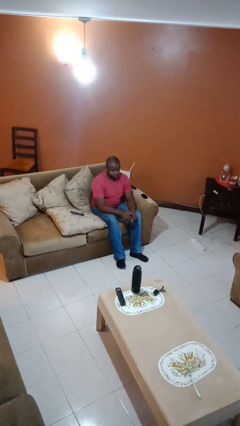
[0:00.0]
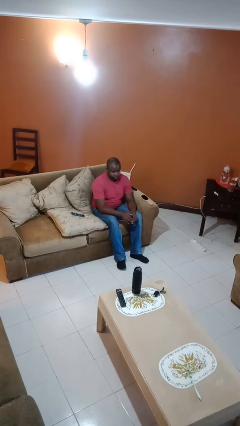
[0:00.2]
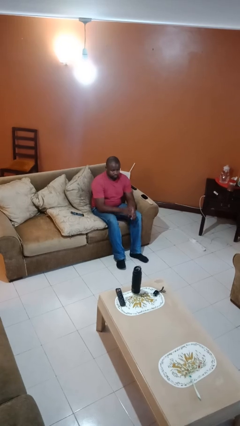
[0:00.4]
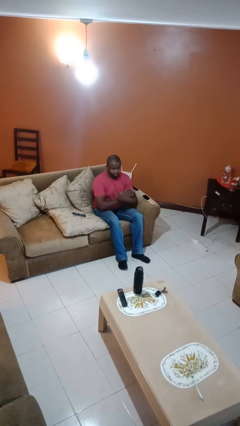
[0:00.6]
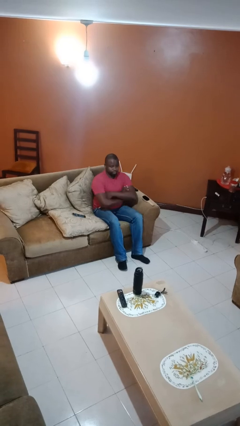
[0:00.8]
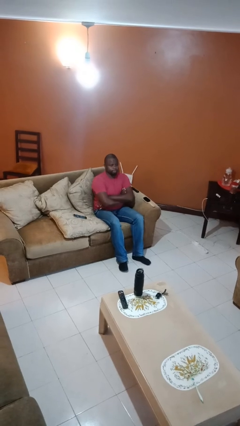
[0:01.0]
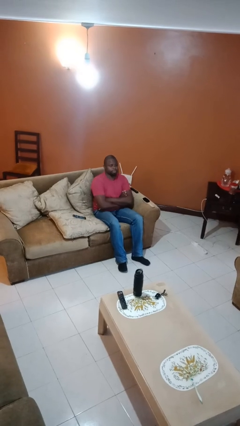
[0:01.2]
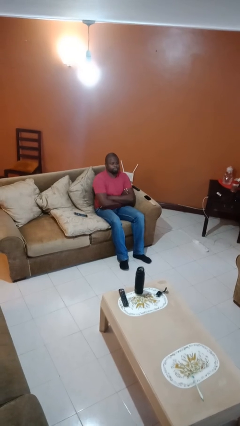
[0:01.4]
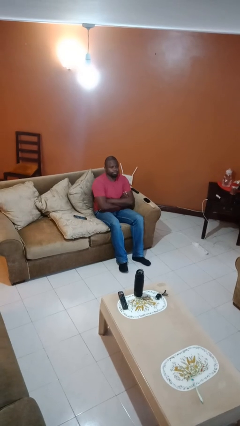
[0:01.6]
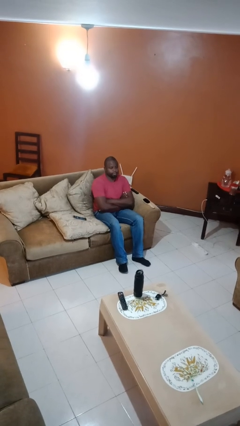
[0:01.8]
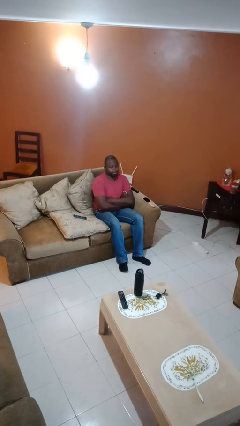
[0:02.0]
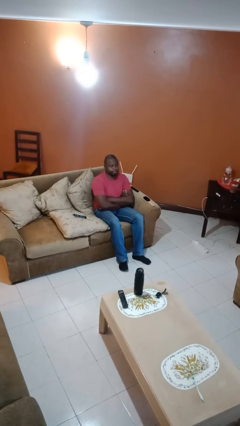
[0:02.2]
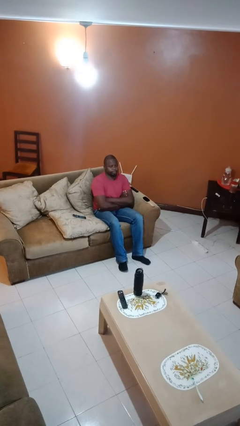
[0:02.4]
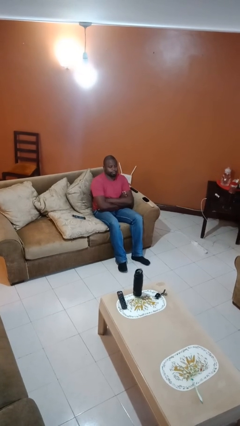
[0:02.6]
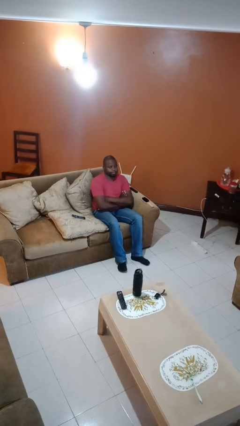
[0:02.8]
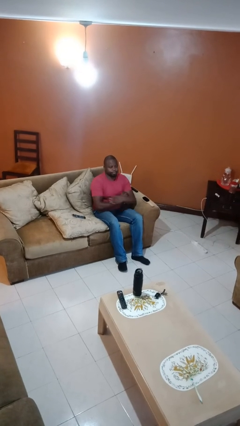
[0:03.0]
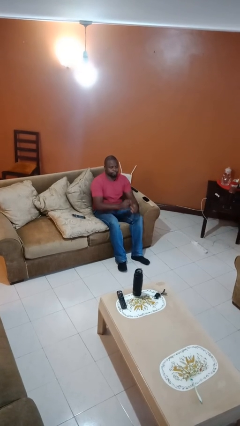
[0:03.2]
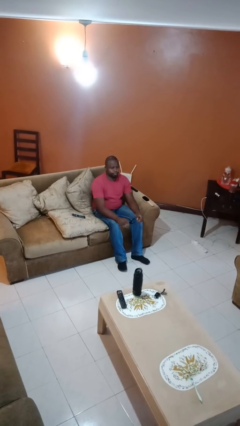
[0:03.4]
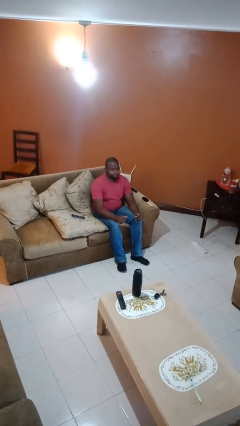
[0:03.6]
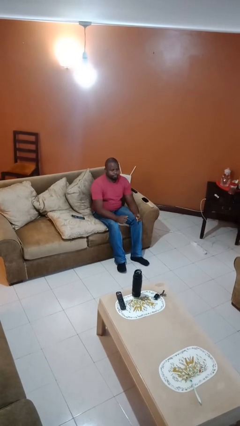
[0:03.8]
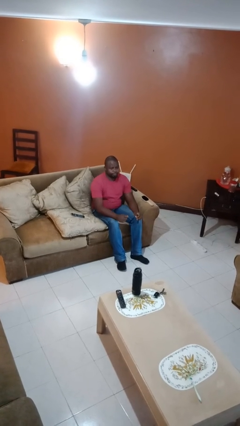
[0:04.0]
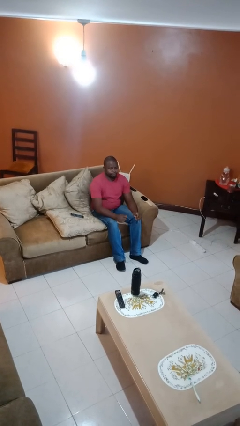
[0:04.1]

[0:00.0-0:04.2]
person crosses arms

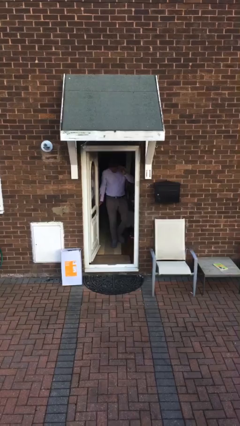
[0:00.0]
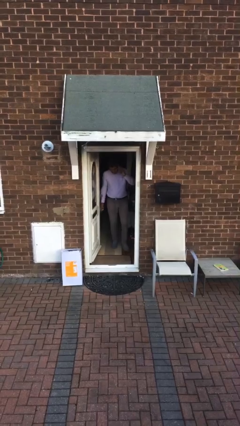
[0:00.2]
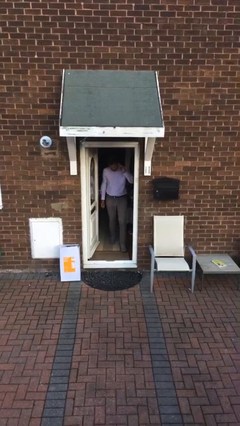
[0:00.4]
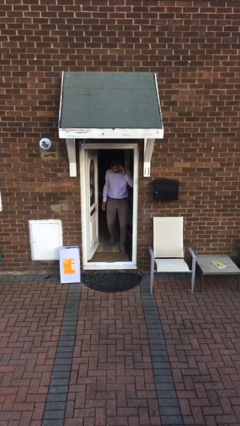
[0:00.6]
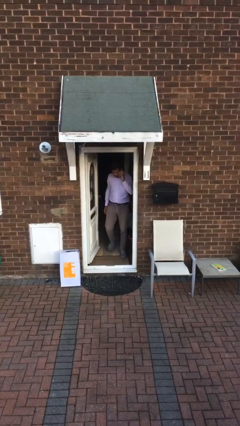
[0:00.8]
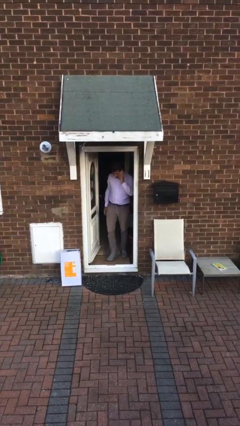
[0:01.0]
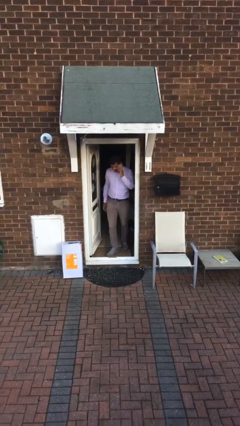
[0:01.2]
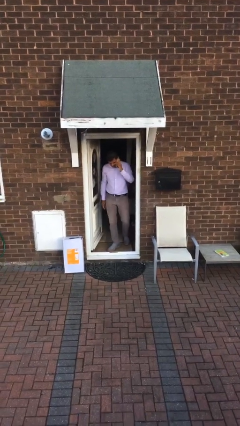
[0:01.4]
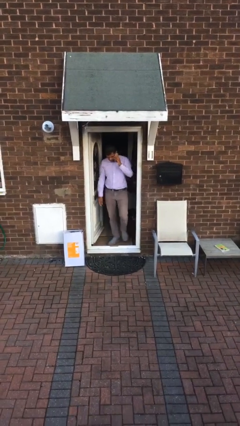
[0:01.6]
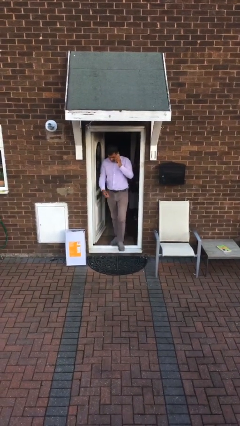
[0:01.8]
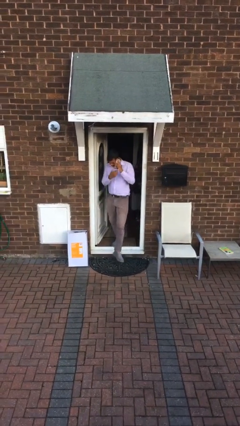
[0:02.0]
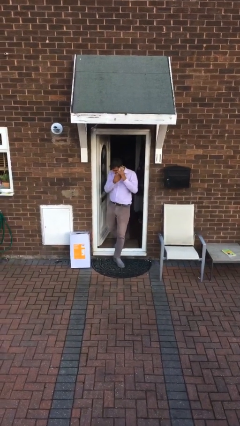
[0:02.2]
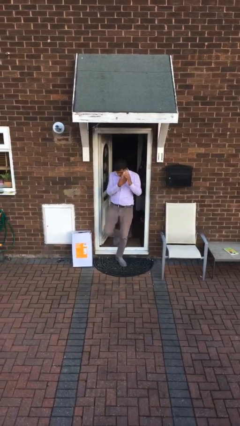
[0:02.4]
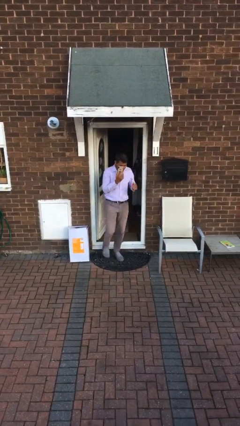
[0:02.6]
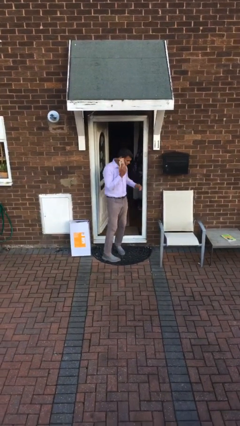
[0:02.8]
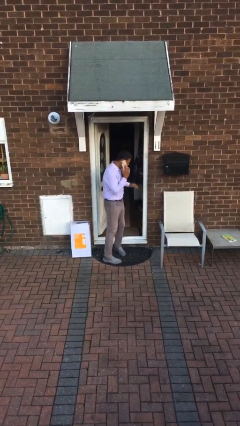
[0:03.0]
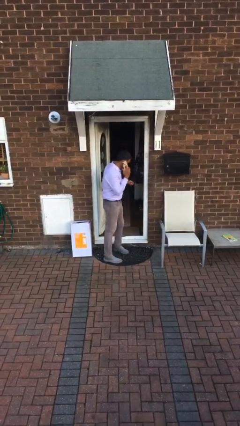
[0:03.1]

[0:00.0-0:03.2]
person enters scene through structure

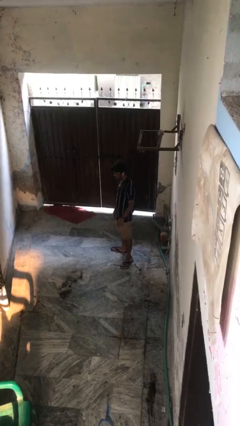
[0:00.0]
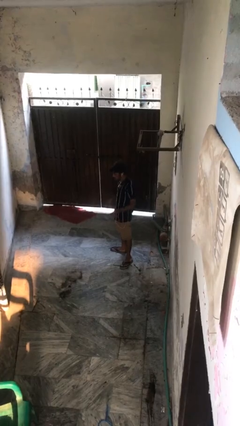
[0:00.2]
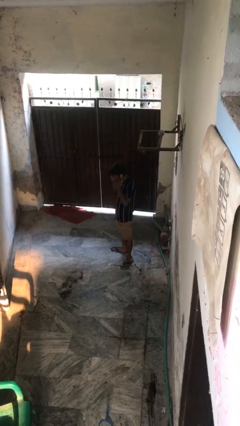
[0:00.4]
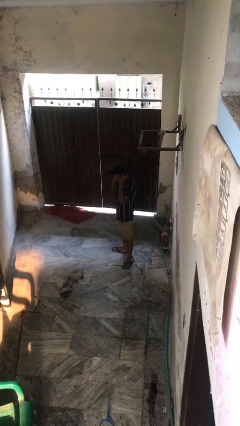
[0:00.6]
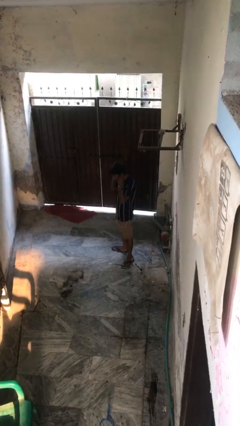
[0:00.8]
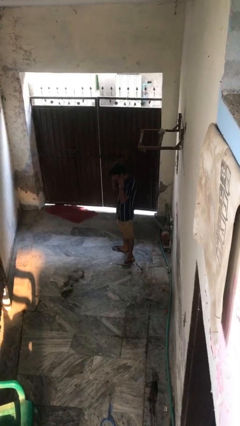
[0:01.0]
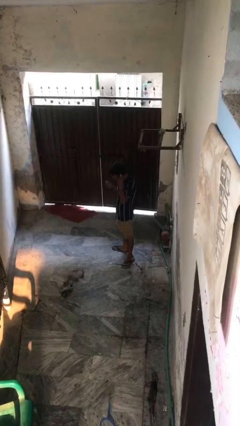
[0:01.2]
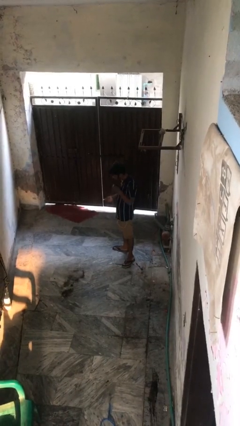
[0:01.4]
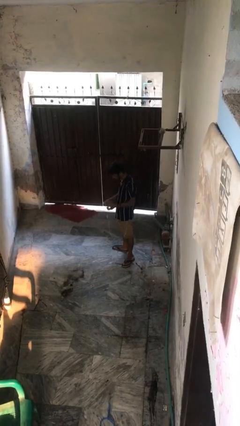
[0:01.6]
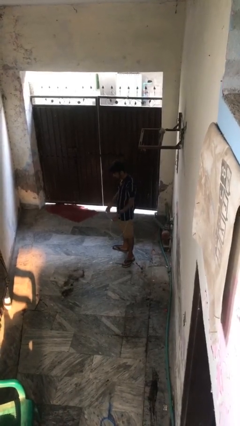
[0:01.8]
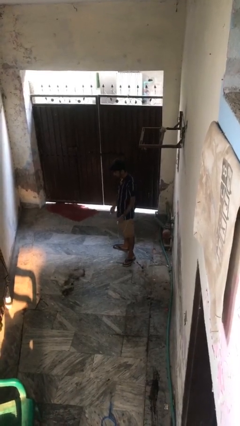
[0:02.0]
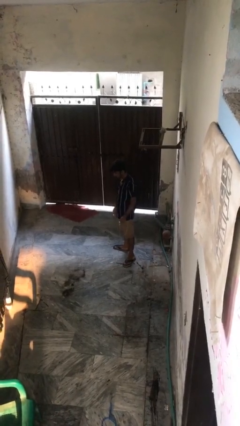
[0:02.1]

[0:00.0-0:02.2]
person takes off headphones

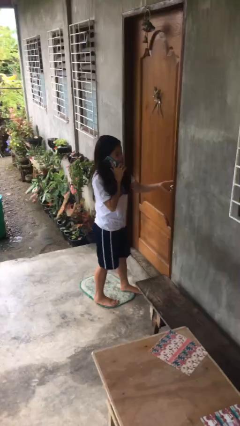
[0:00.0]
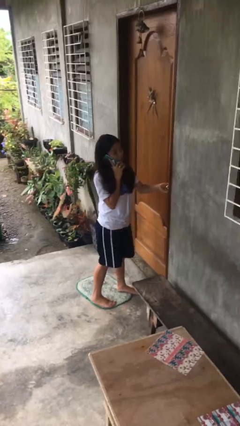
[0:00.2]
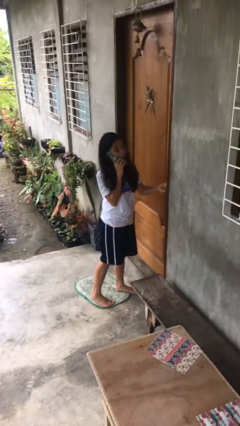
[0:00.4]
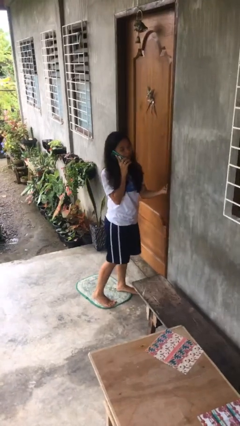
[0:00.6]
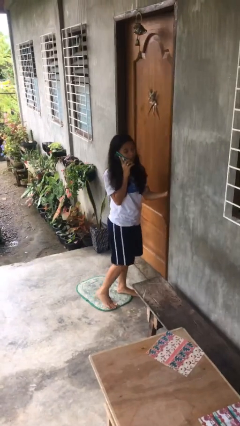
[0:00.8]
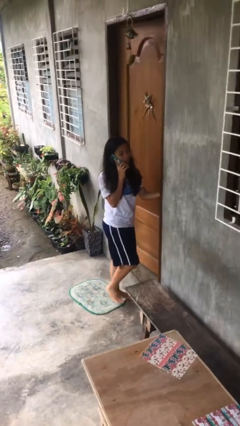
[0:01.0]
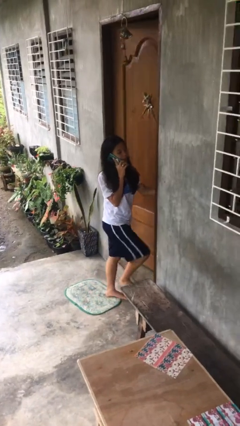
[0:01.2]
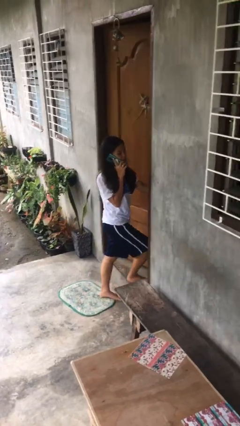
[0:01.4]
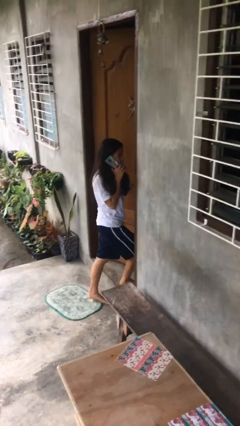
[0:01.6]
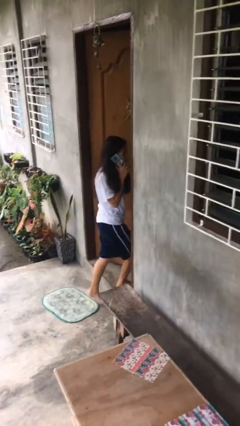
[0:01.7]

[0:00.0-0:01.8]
person opens facility door

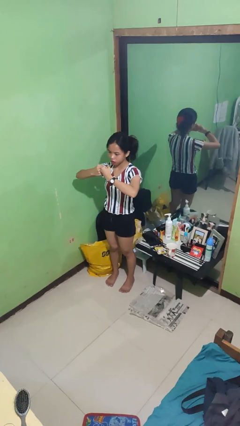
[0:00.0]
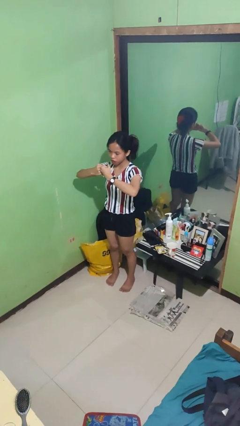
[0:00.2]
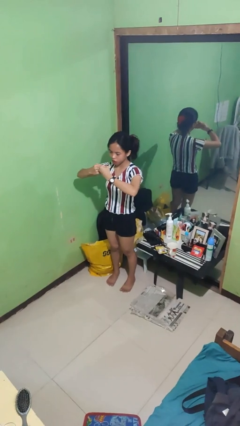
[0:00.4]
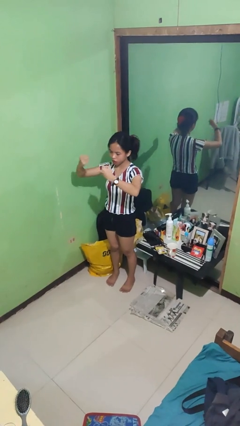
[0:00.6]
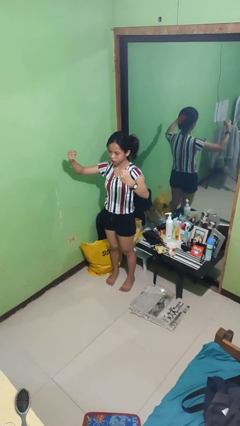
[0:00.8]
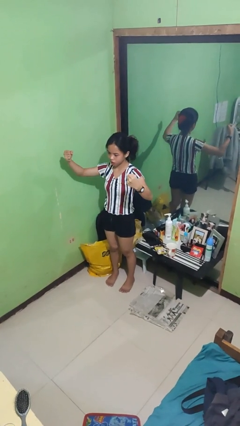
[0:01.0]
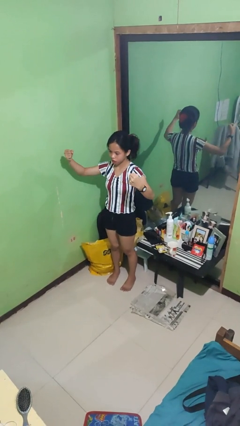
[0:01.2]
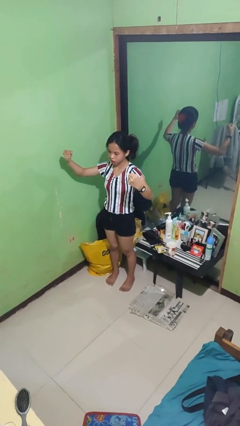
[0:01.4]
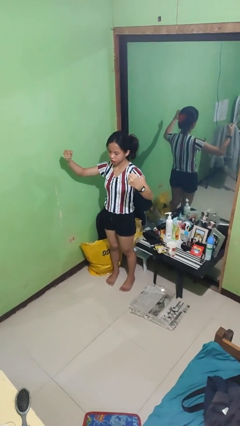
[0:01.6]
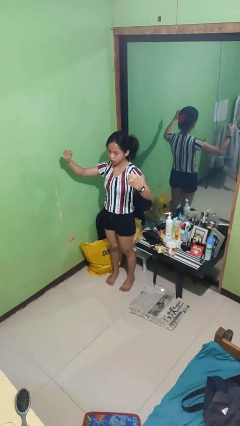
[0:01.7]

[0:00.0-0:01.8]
person gestures zoom in

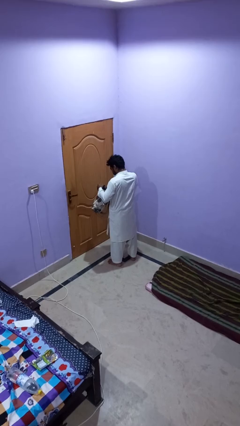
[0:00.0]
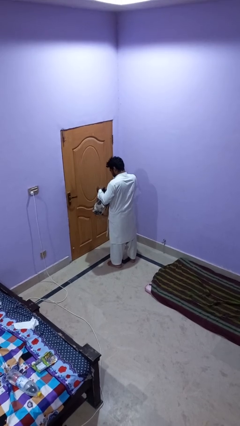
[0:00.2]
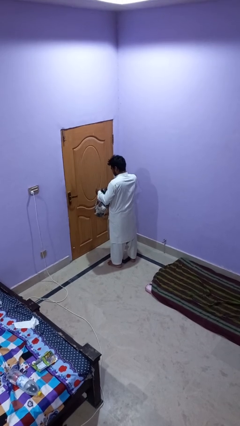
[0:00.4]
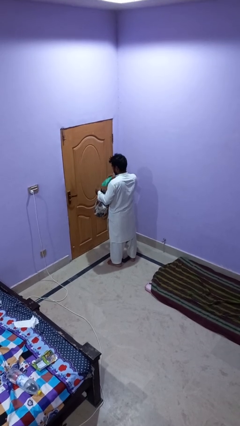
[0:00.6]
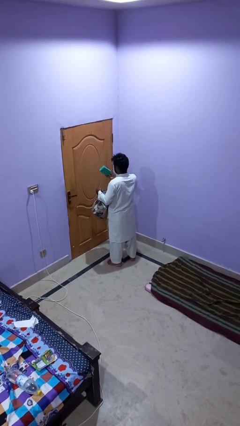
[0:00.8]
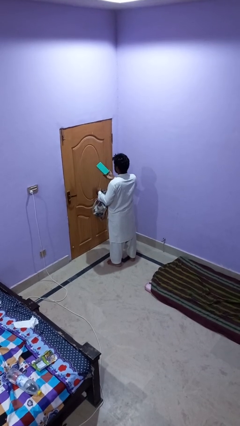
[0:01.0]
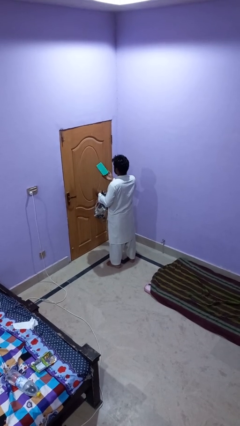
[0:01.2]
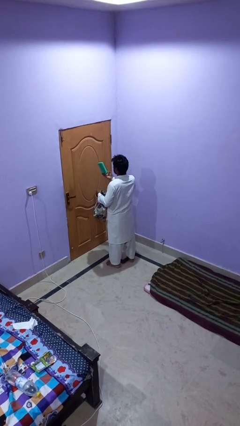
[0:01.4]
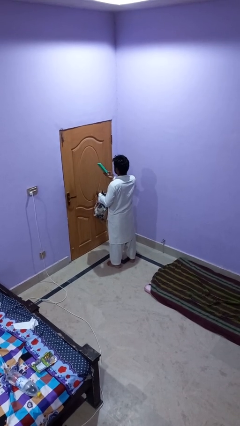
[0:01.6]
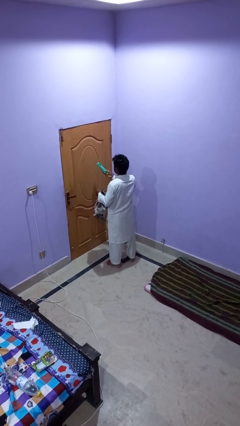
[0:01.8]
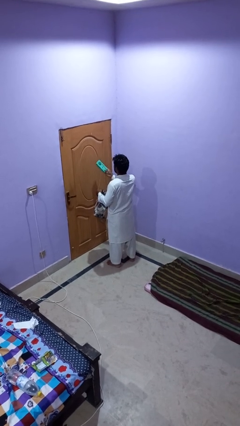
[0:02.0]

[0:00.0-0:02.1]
person takes object from backpack

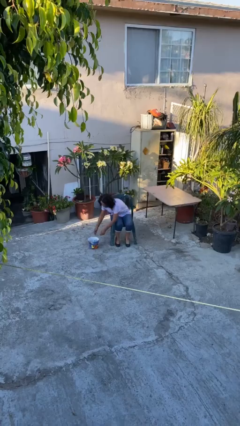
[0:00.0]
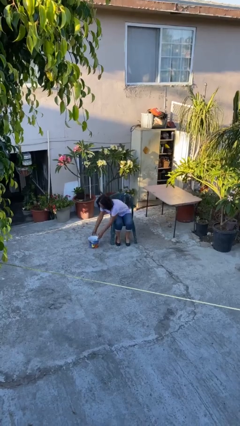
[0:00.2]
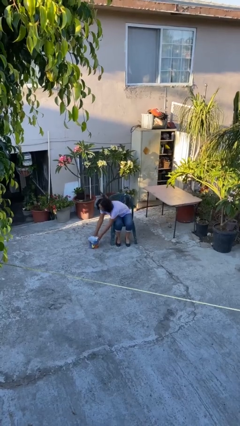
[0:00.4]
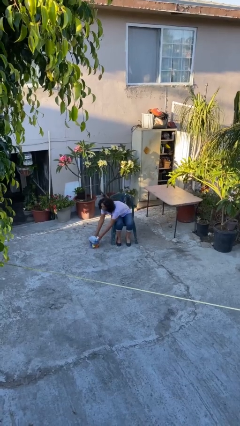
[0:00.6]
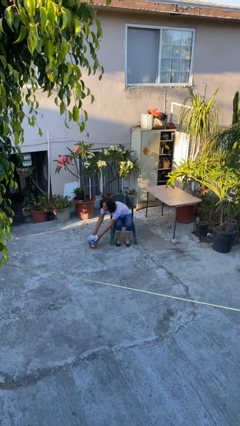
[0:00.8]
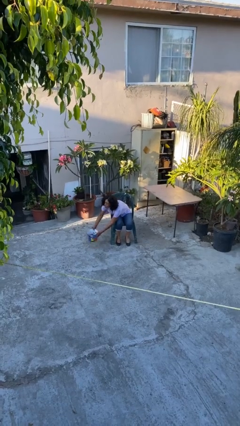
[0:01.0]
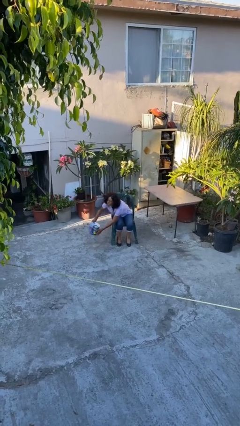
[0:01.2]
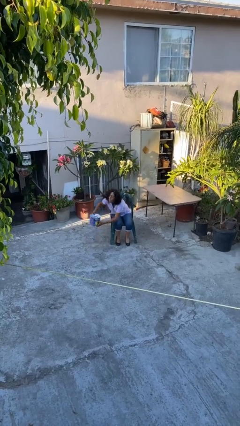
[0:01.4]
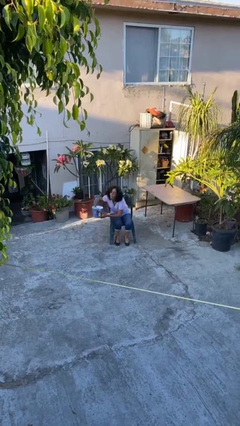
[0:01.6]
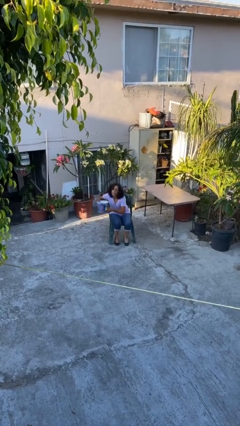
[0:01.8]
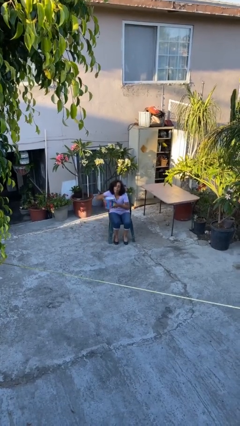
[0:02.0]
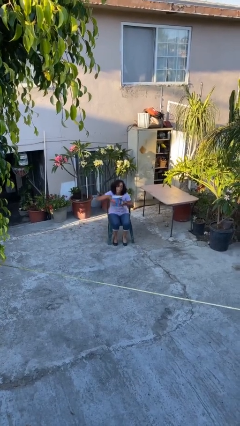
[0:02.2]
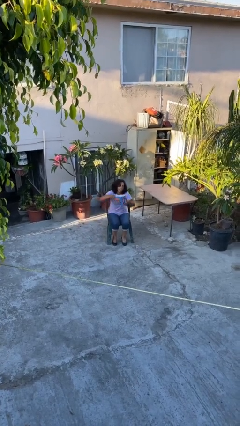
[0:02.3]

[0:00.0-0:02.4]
person picks up object from floor
